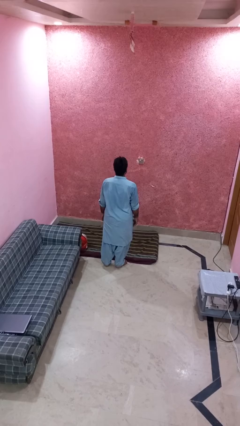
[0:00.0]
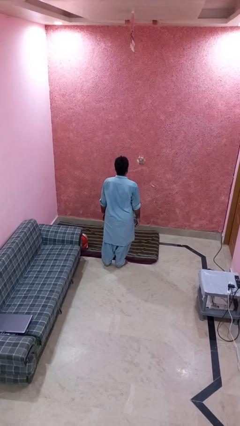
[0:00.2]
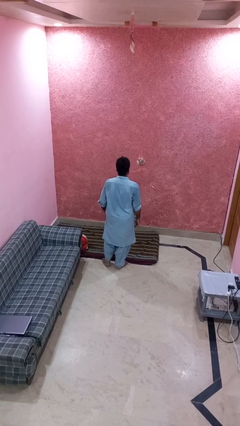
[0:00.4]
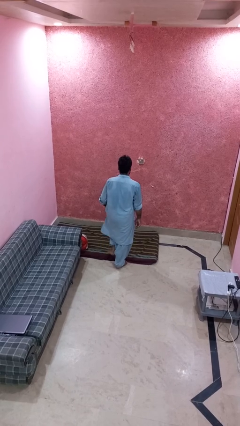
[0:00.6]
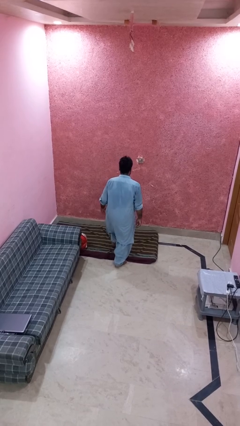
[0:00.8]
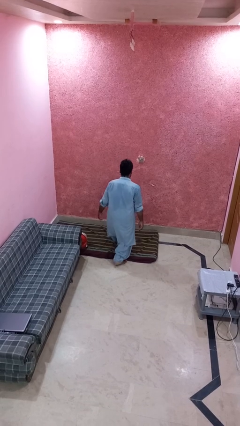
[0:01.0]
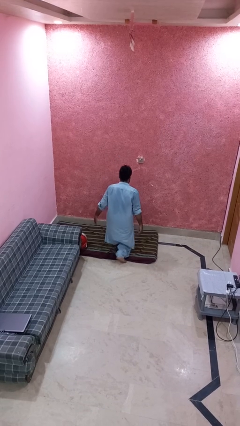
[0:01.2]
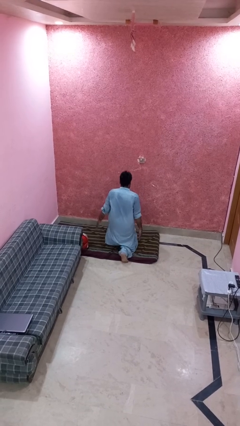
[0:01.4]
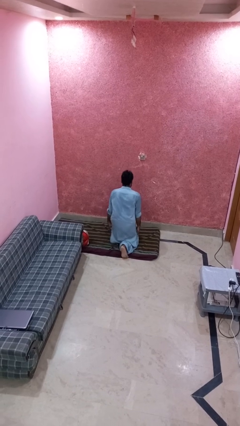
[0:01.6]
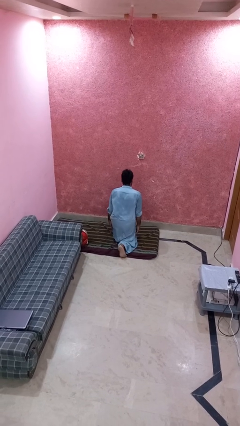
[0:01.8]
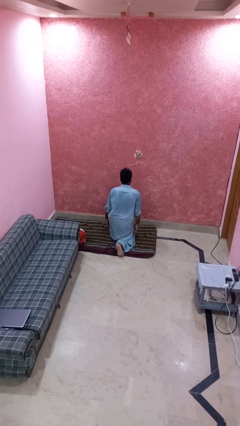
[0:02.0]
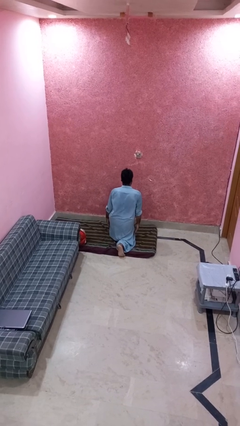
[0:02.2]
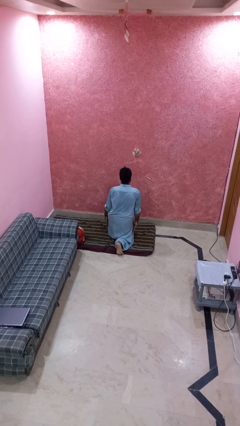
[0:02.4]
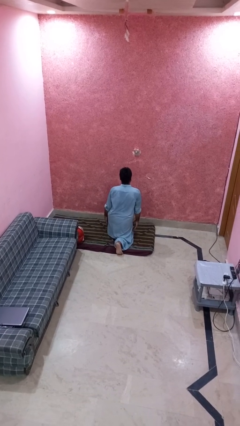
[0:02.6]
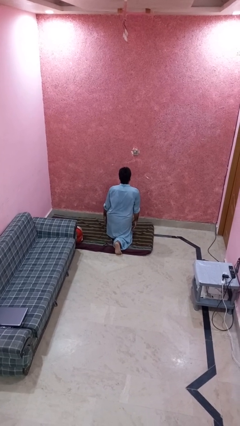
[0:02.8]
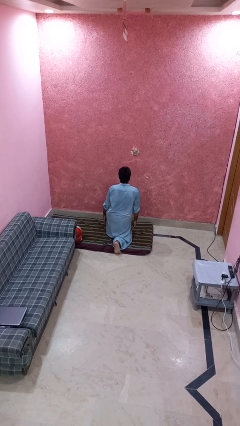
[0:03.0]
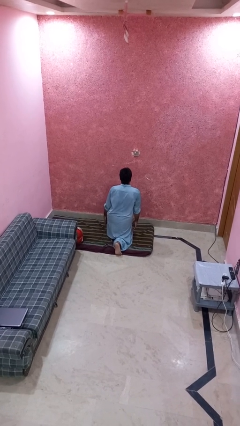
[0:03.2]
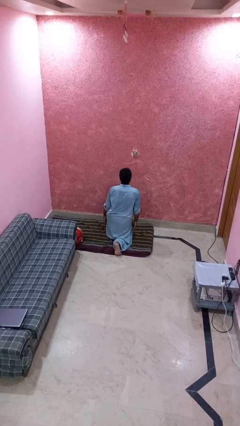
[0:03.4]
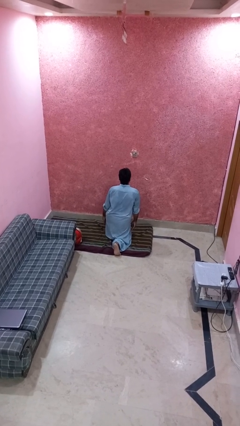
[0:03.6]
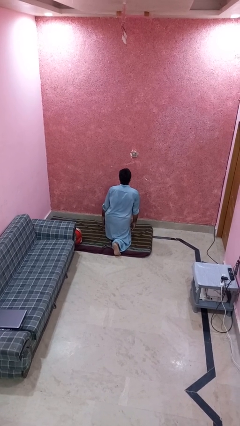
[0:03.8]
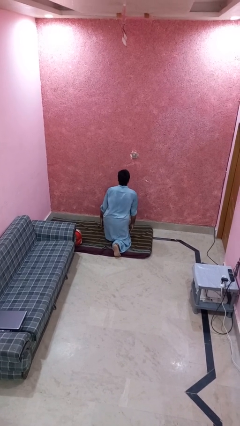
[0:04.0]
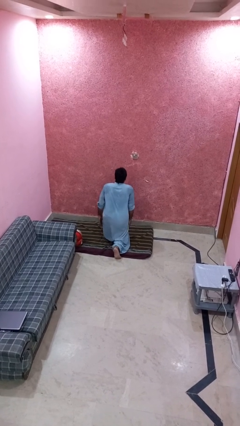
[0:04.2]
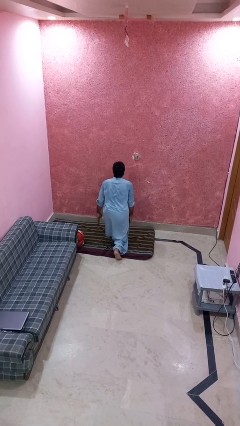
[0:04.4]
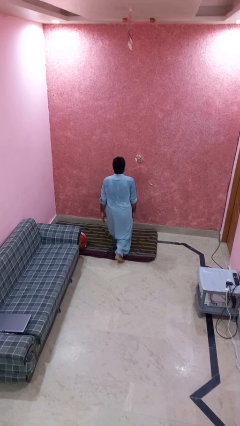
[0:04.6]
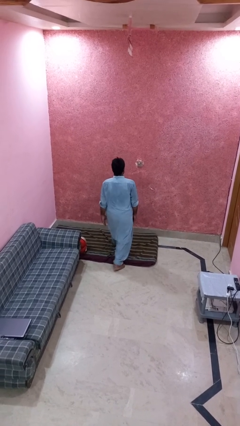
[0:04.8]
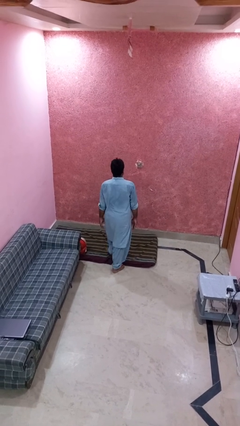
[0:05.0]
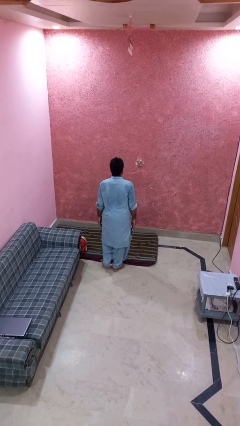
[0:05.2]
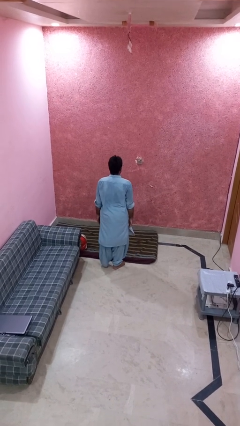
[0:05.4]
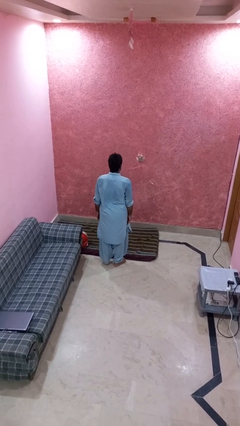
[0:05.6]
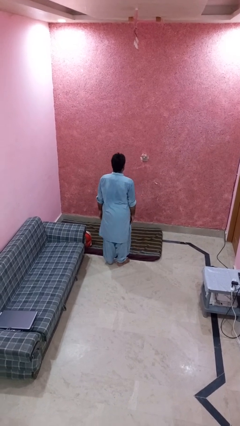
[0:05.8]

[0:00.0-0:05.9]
person exercises with lunges

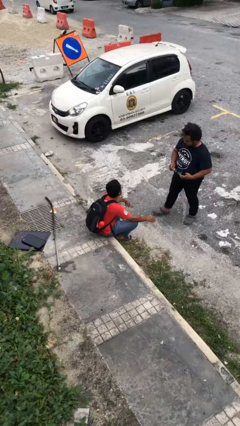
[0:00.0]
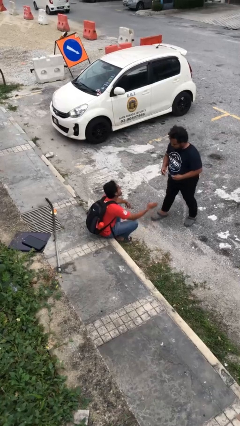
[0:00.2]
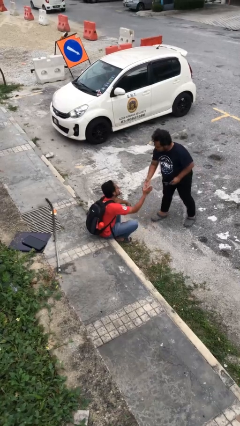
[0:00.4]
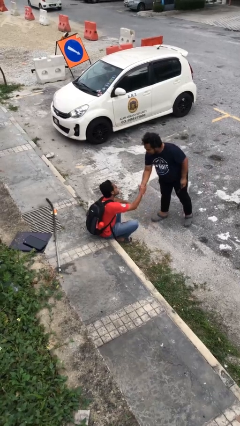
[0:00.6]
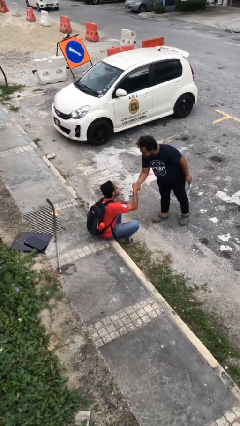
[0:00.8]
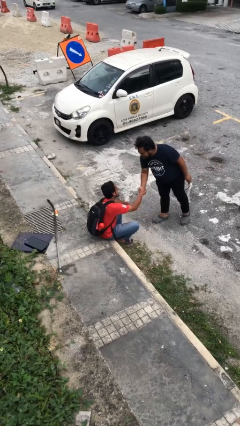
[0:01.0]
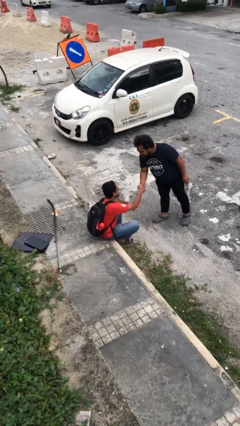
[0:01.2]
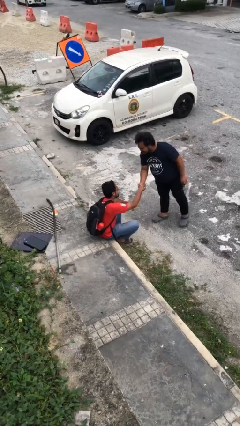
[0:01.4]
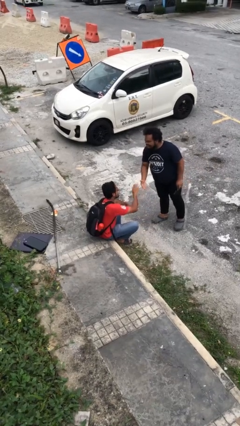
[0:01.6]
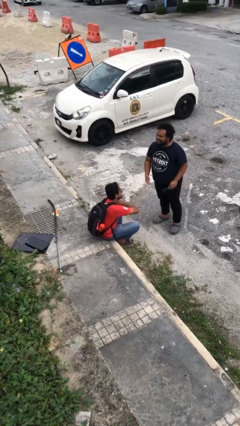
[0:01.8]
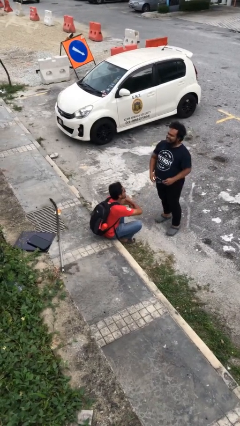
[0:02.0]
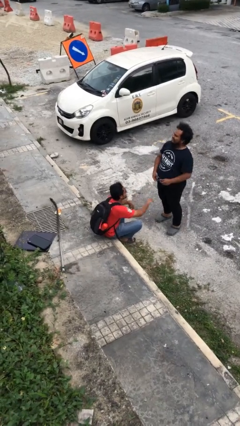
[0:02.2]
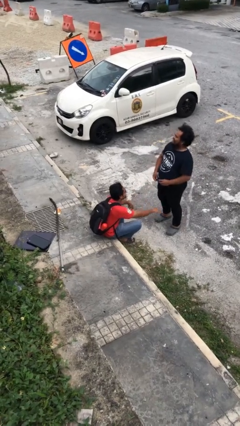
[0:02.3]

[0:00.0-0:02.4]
person shakes hand

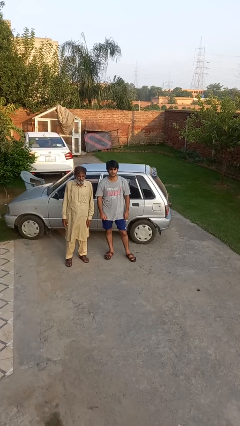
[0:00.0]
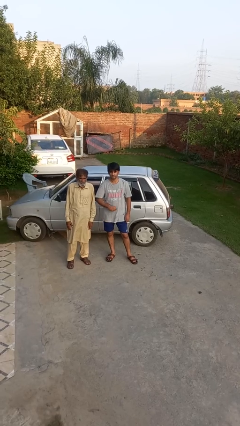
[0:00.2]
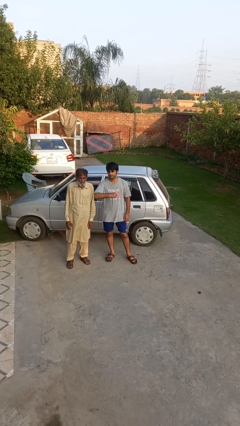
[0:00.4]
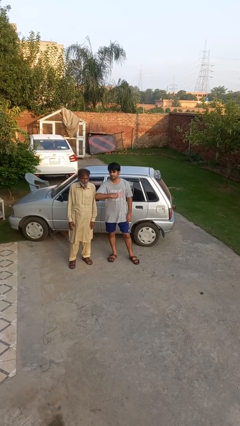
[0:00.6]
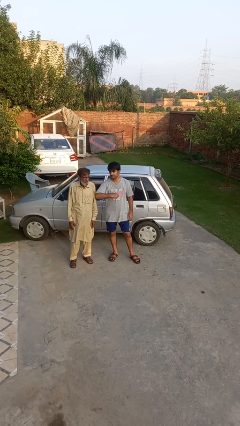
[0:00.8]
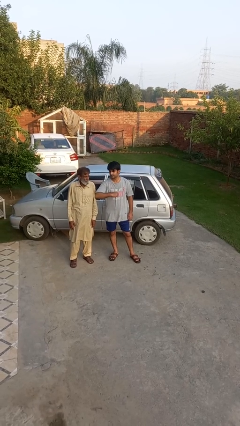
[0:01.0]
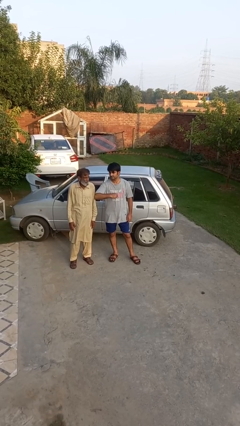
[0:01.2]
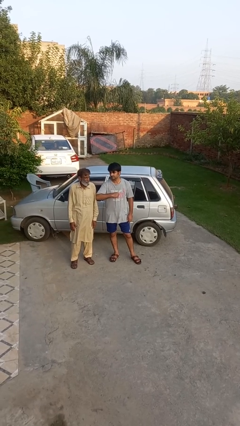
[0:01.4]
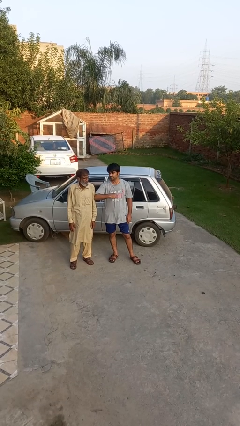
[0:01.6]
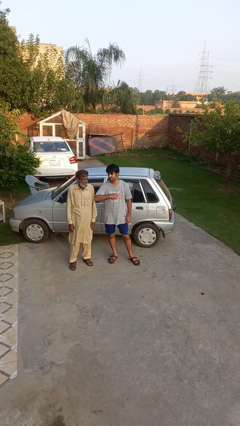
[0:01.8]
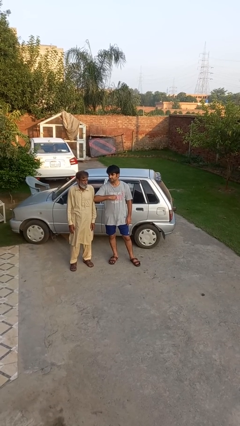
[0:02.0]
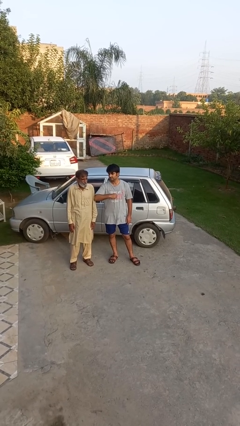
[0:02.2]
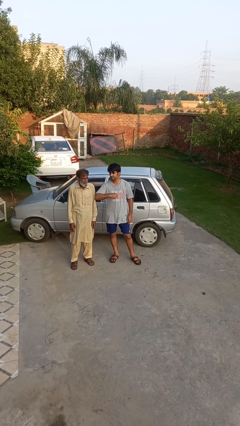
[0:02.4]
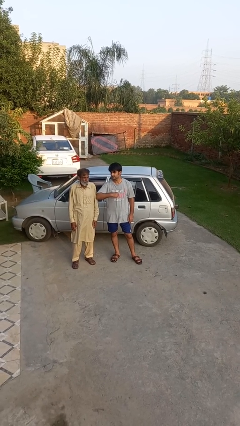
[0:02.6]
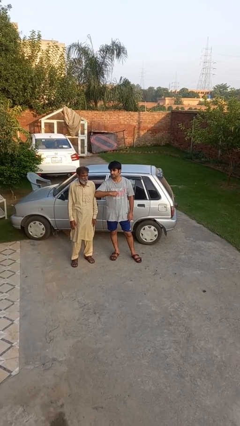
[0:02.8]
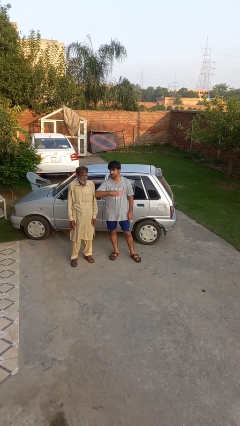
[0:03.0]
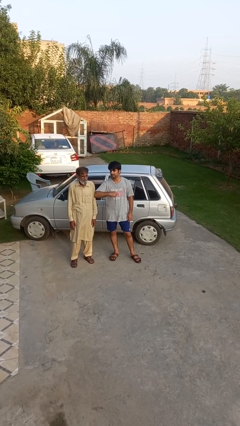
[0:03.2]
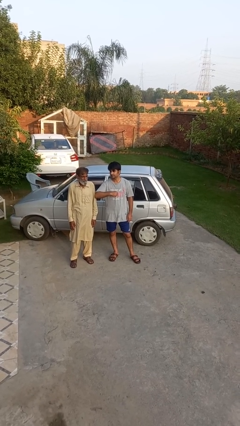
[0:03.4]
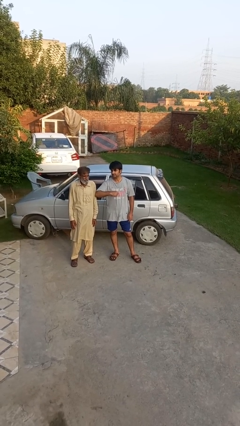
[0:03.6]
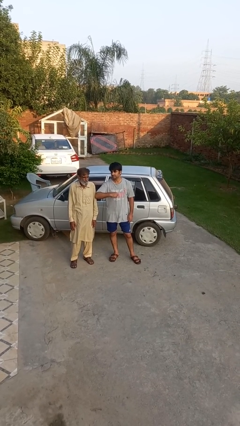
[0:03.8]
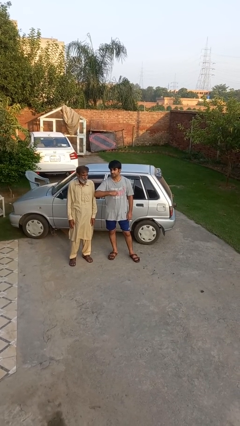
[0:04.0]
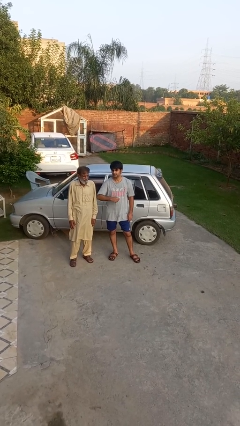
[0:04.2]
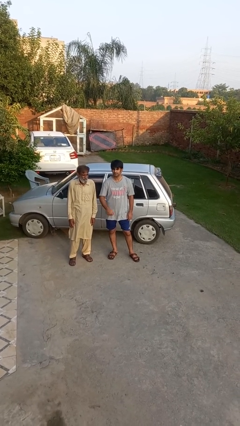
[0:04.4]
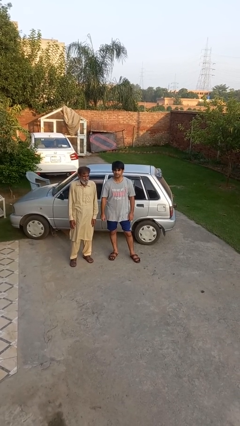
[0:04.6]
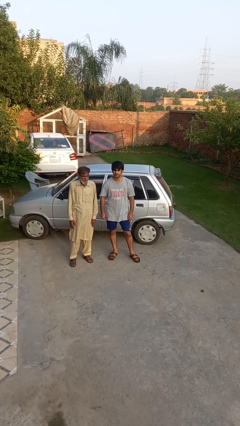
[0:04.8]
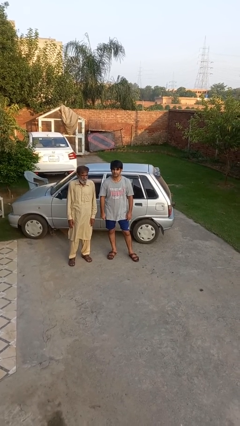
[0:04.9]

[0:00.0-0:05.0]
person nudges person with elbow

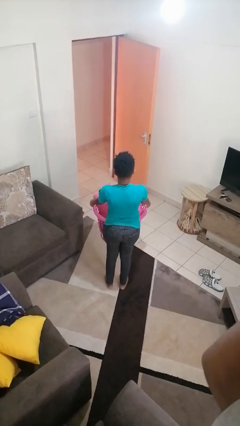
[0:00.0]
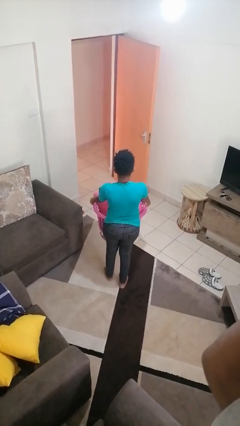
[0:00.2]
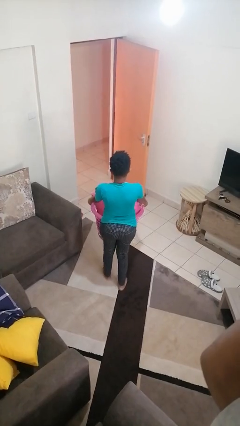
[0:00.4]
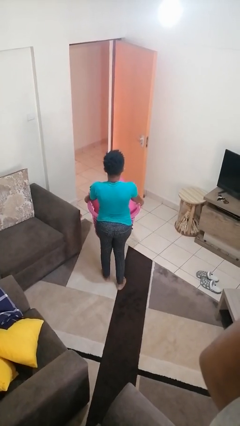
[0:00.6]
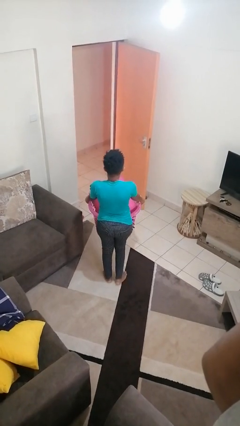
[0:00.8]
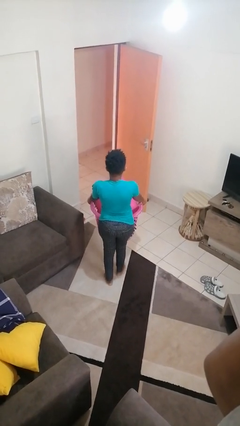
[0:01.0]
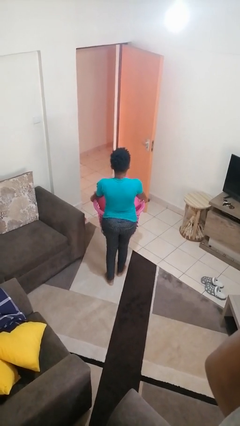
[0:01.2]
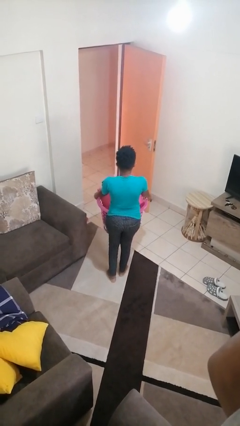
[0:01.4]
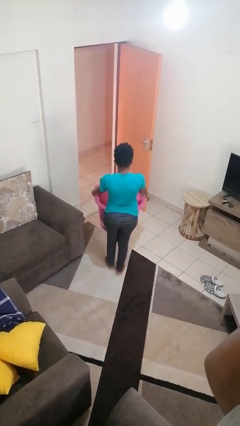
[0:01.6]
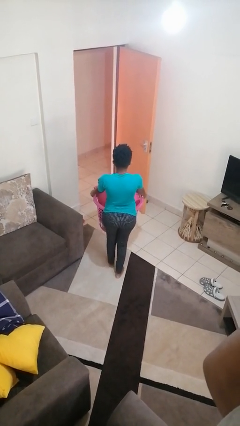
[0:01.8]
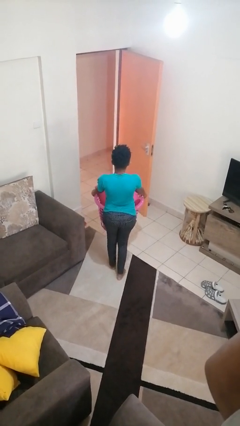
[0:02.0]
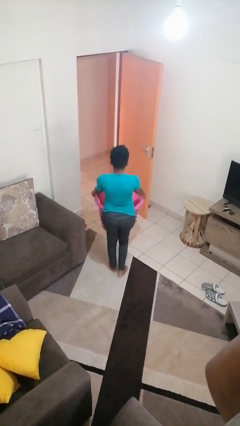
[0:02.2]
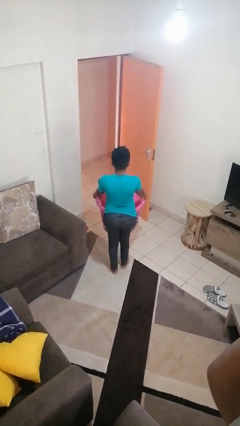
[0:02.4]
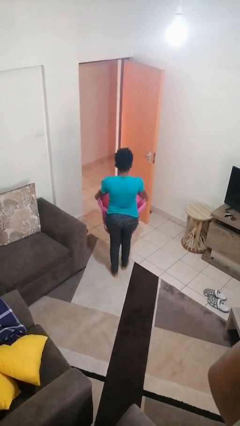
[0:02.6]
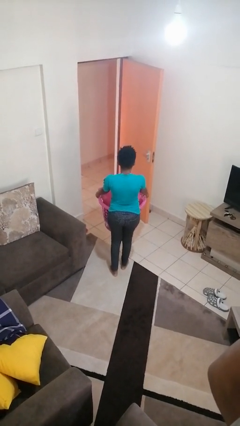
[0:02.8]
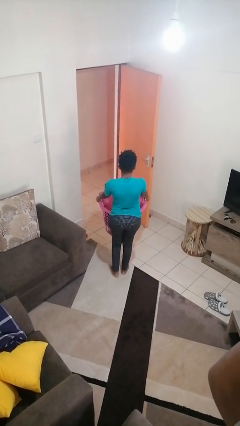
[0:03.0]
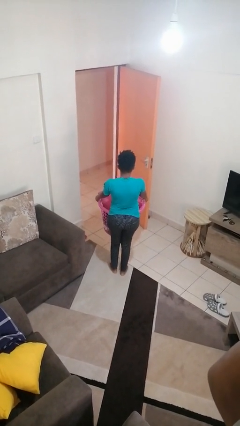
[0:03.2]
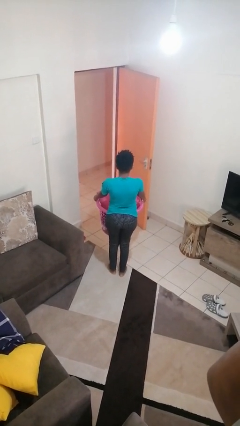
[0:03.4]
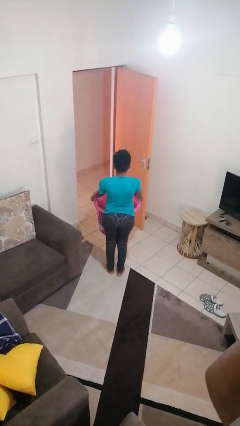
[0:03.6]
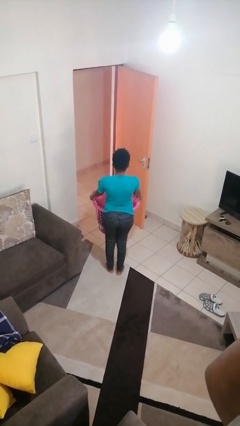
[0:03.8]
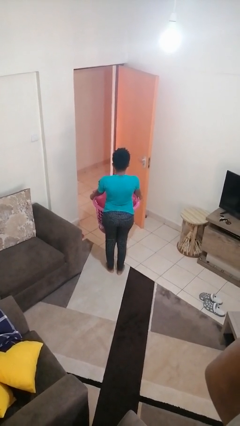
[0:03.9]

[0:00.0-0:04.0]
person carries laundry basket

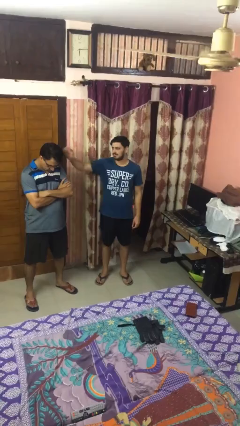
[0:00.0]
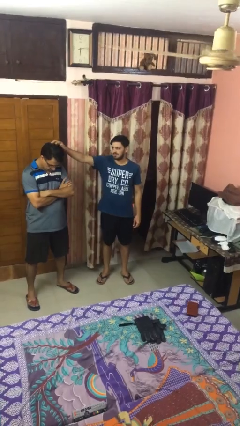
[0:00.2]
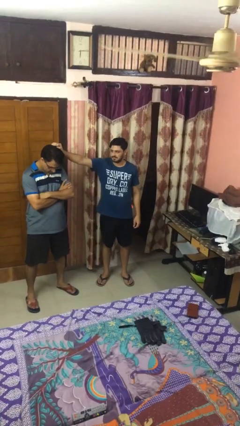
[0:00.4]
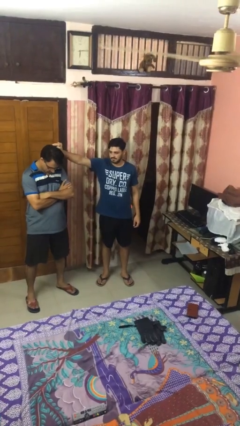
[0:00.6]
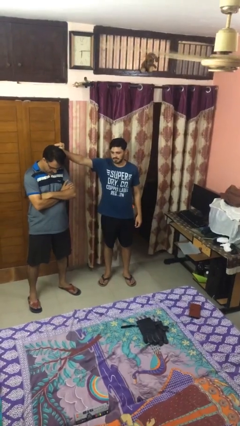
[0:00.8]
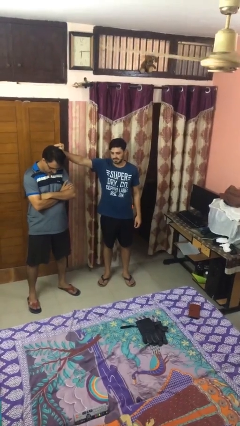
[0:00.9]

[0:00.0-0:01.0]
person grabs person by hair
